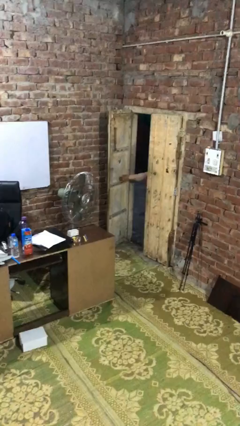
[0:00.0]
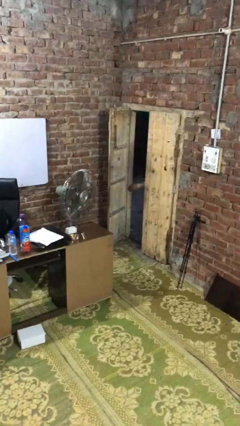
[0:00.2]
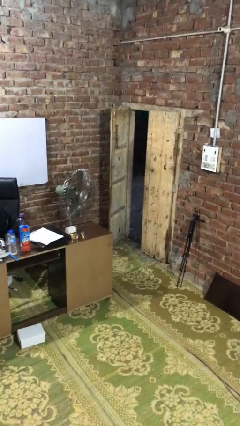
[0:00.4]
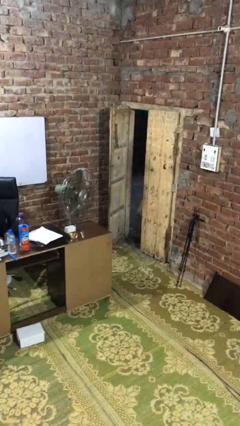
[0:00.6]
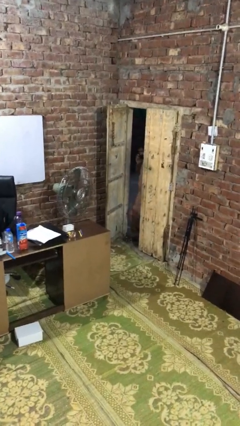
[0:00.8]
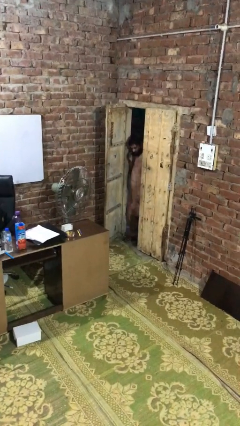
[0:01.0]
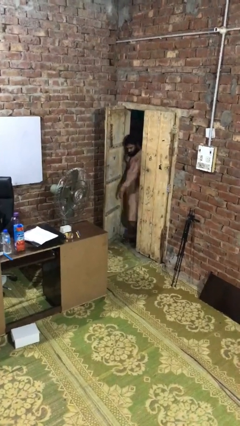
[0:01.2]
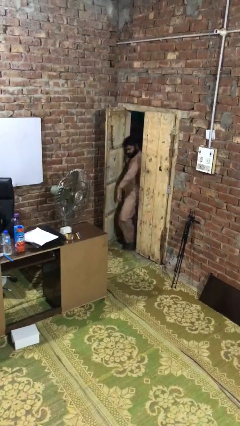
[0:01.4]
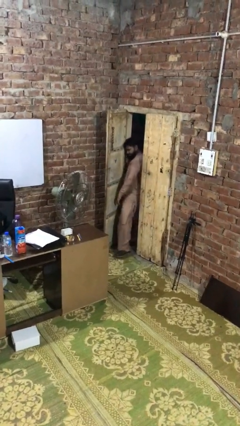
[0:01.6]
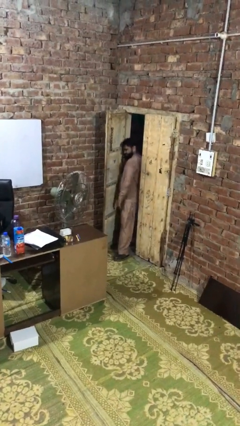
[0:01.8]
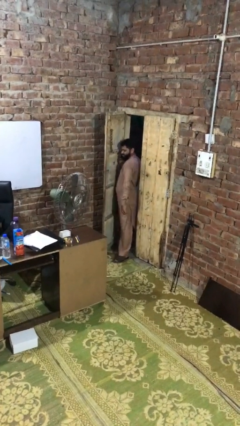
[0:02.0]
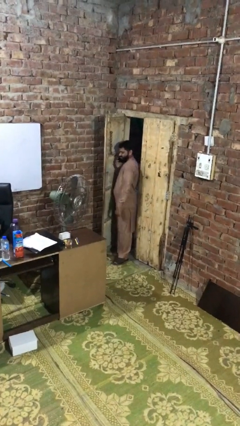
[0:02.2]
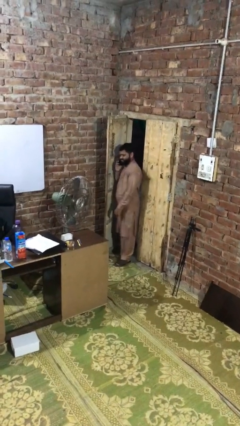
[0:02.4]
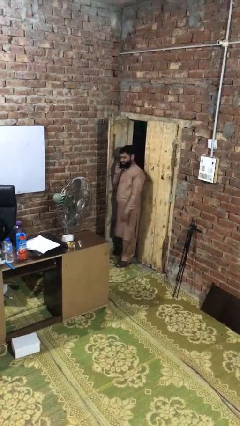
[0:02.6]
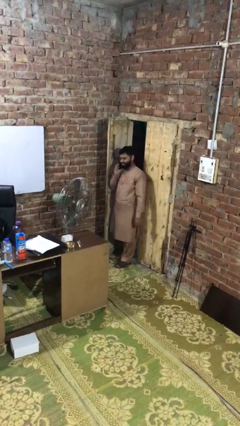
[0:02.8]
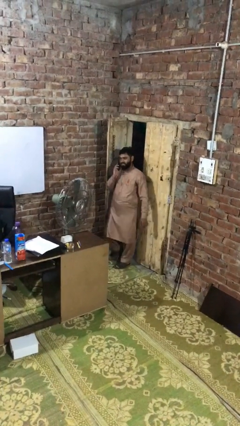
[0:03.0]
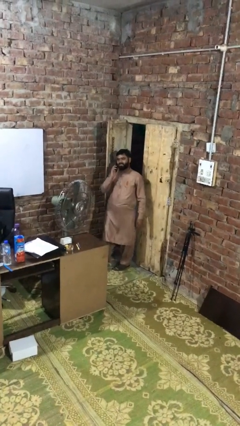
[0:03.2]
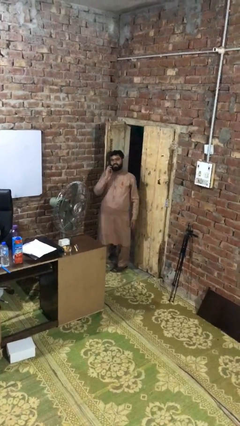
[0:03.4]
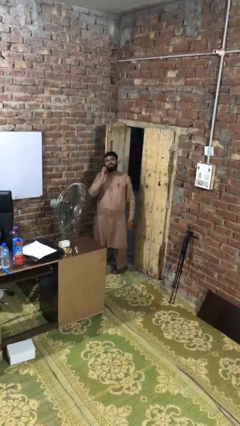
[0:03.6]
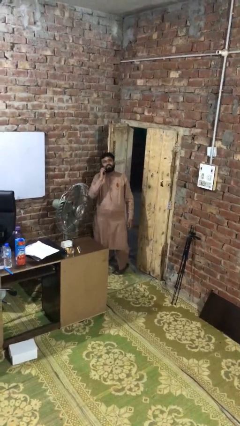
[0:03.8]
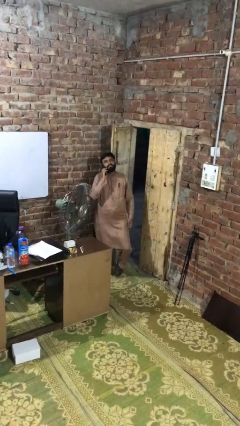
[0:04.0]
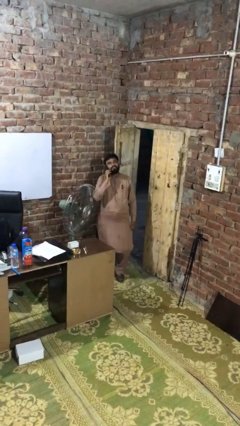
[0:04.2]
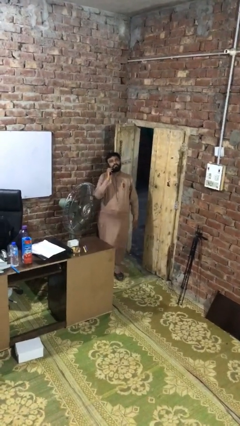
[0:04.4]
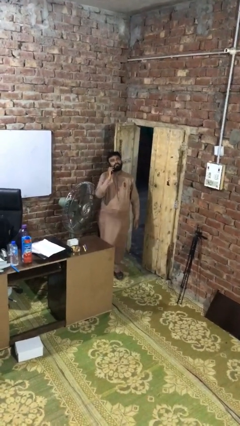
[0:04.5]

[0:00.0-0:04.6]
person enters scene through structure

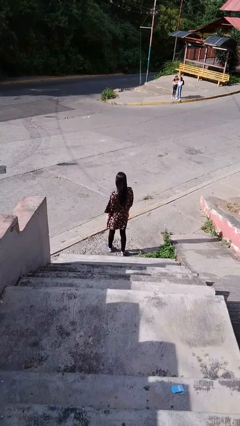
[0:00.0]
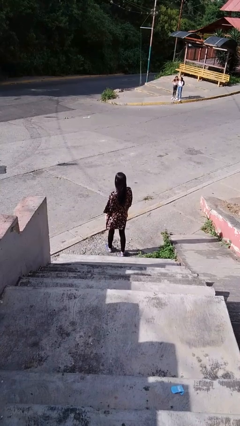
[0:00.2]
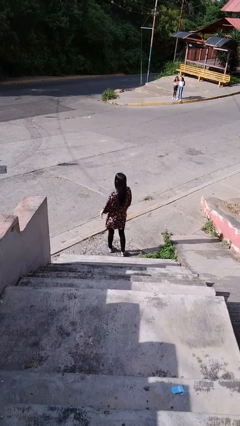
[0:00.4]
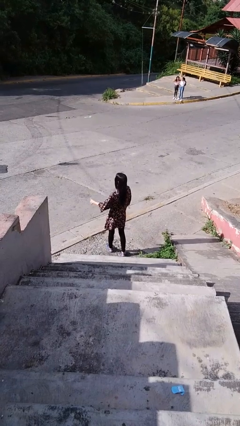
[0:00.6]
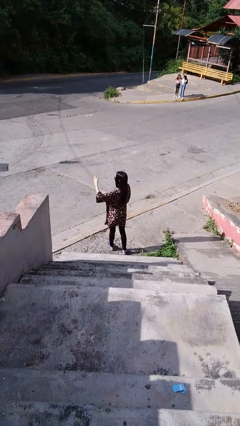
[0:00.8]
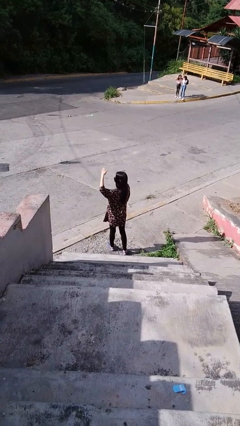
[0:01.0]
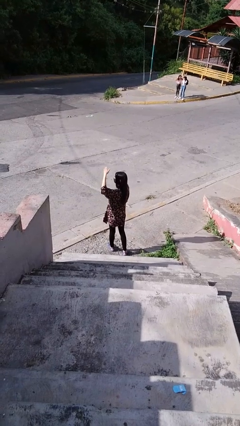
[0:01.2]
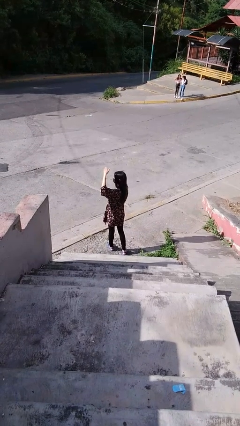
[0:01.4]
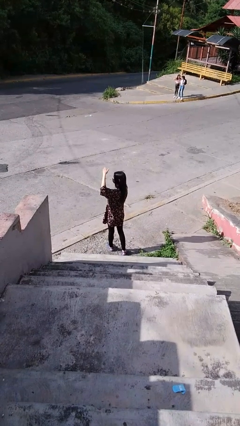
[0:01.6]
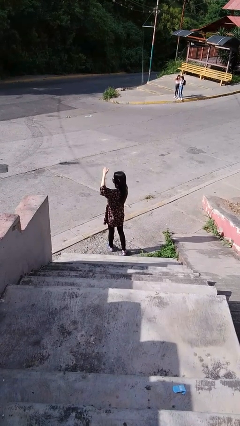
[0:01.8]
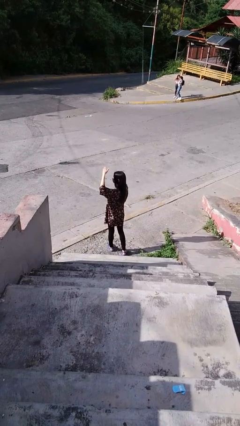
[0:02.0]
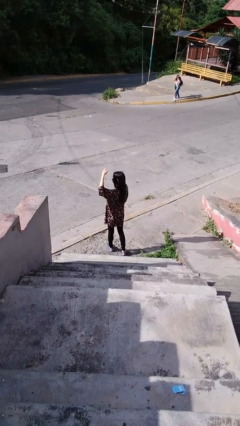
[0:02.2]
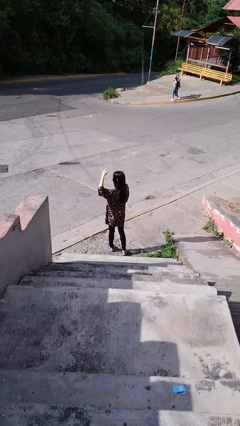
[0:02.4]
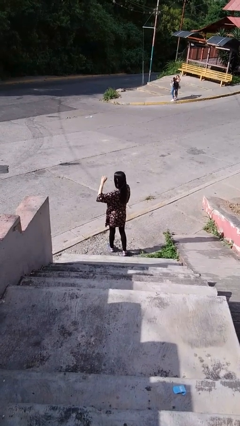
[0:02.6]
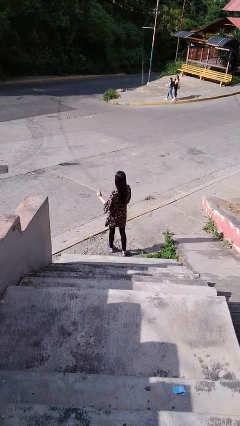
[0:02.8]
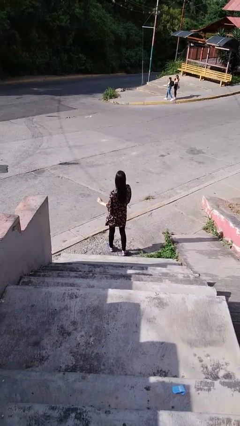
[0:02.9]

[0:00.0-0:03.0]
person shades eyes

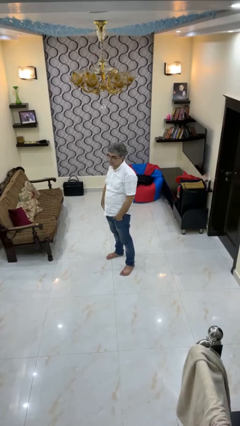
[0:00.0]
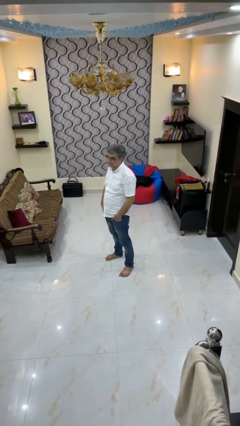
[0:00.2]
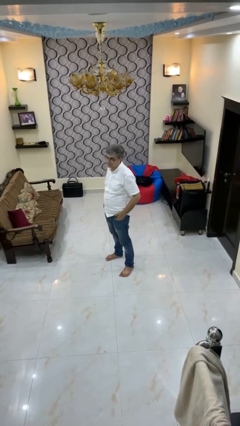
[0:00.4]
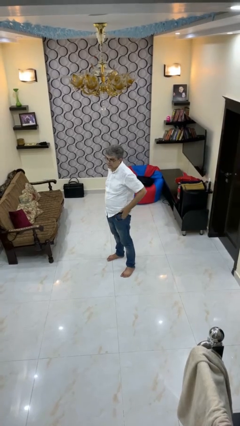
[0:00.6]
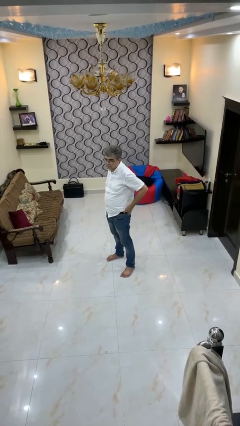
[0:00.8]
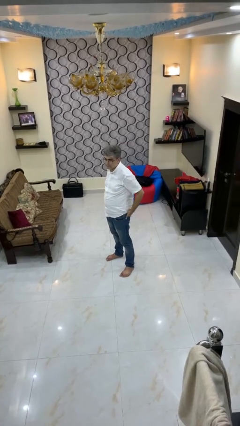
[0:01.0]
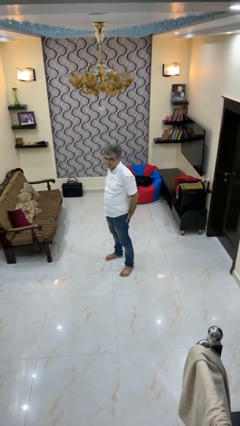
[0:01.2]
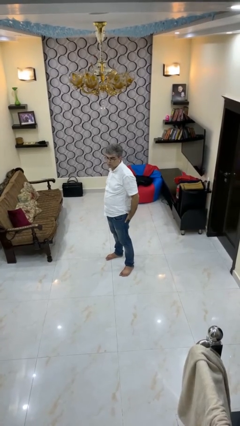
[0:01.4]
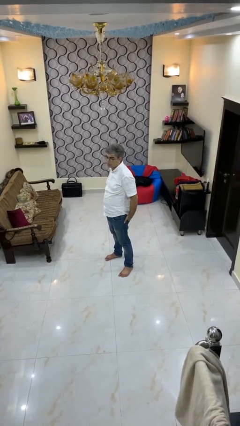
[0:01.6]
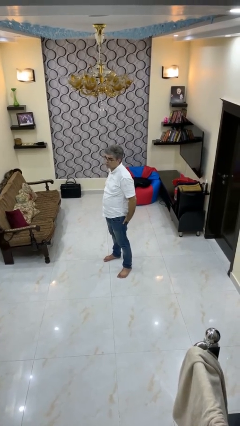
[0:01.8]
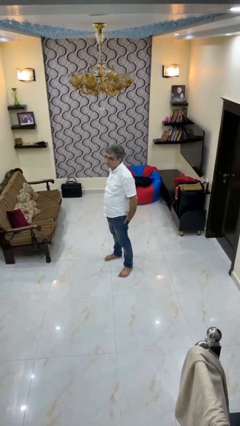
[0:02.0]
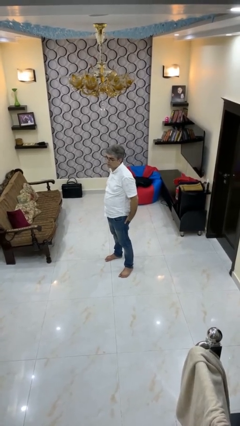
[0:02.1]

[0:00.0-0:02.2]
person puts hands in back pockets

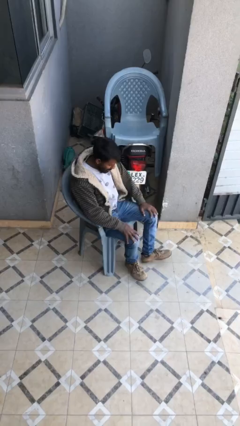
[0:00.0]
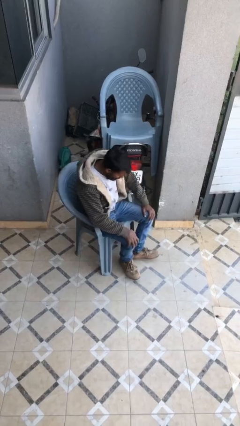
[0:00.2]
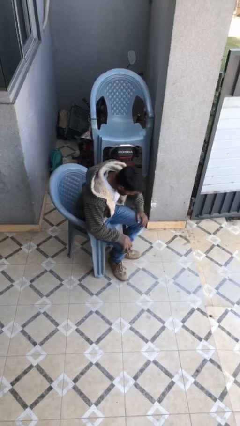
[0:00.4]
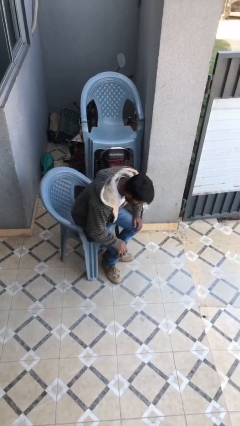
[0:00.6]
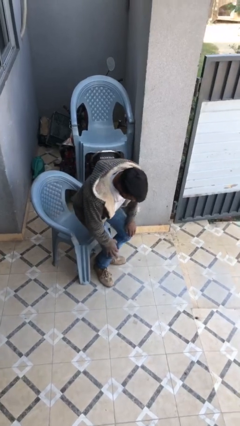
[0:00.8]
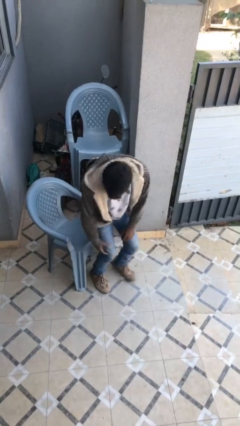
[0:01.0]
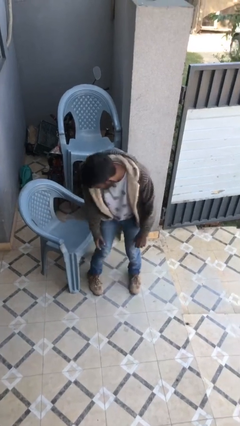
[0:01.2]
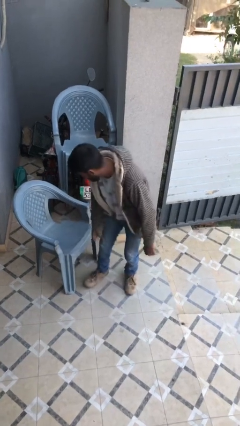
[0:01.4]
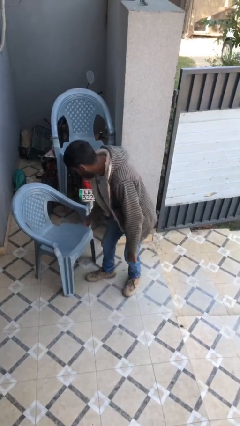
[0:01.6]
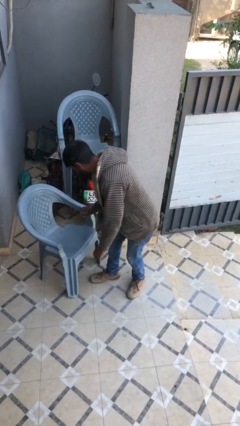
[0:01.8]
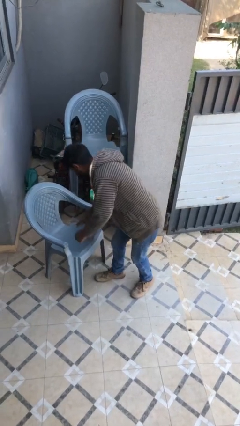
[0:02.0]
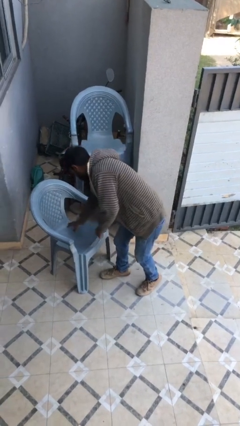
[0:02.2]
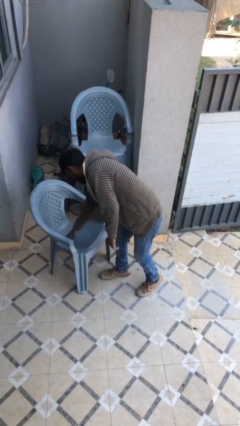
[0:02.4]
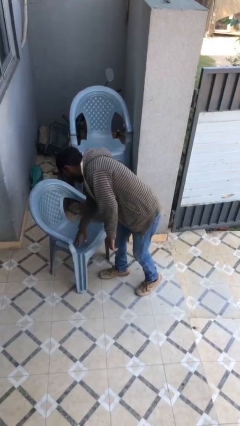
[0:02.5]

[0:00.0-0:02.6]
person stands up

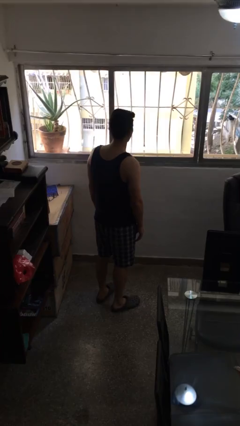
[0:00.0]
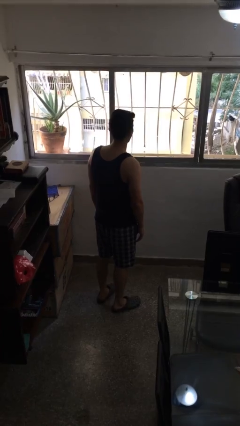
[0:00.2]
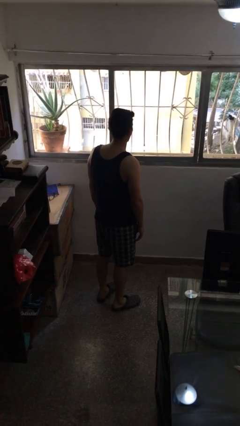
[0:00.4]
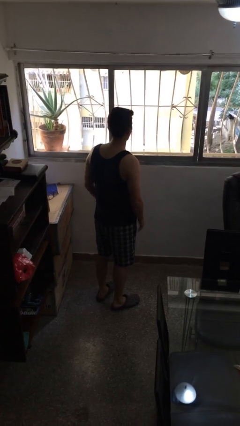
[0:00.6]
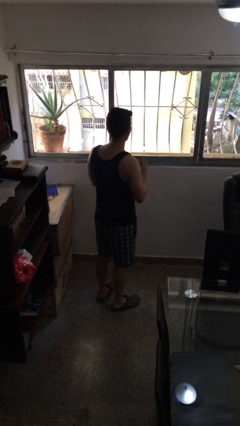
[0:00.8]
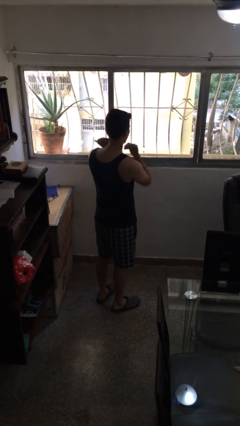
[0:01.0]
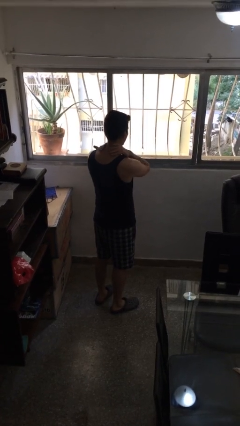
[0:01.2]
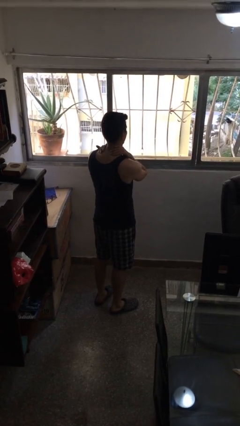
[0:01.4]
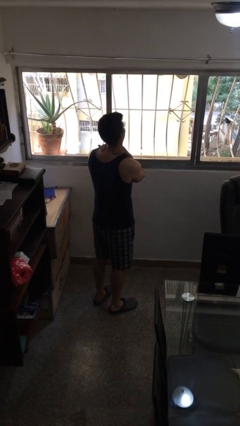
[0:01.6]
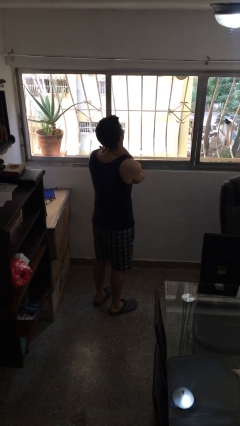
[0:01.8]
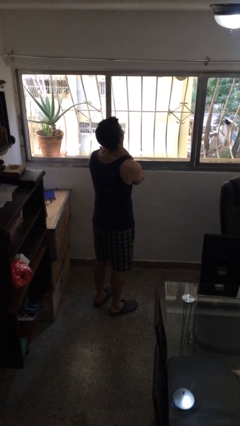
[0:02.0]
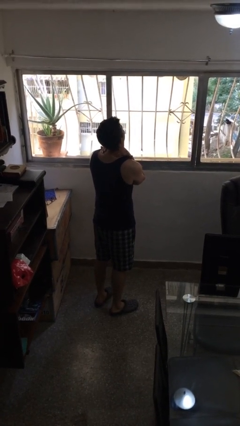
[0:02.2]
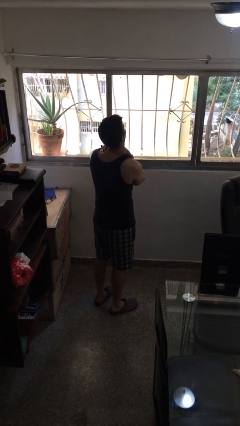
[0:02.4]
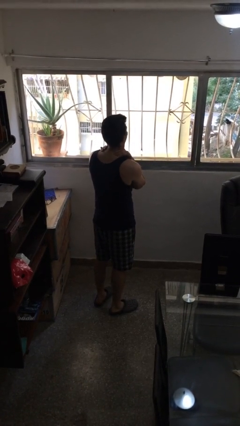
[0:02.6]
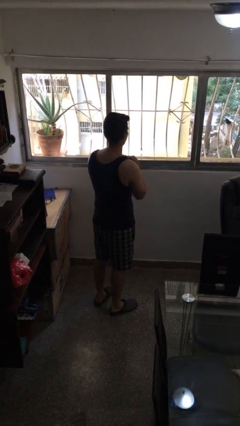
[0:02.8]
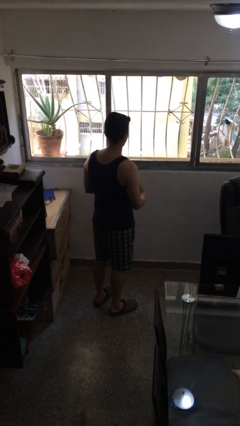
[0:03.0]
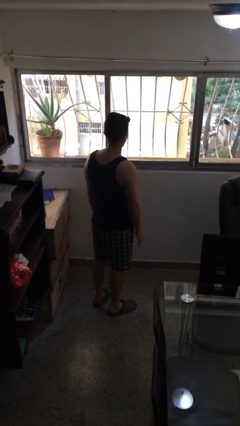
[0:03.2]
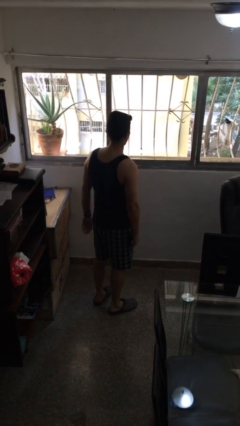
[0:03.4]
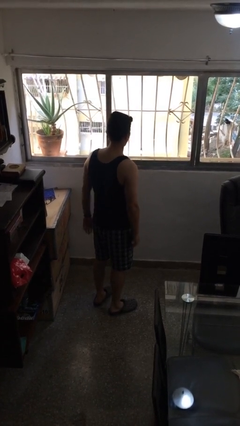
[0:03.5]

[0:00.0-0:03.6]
person rubs neck

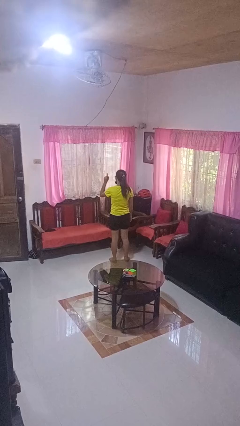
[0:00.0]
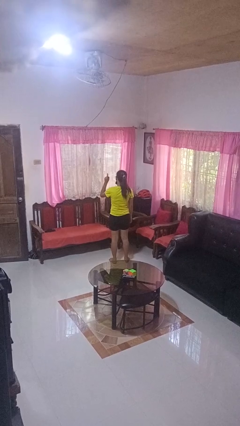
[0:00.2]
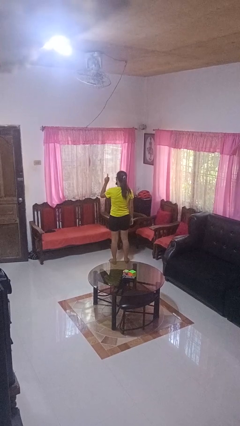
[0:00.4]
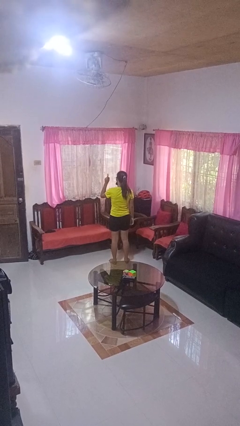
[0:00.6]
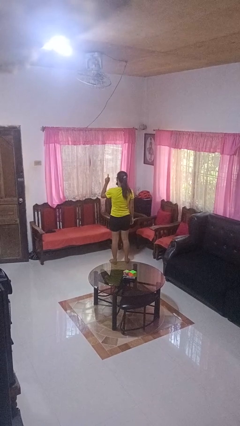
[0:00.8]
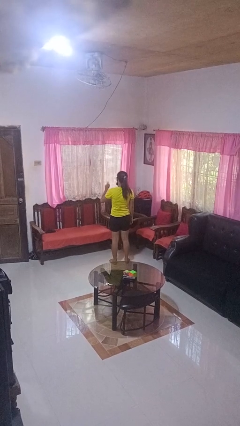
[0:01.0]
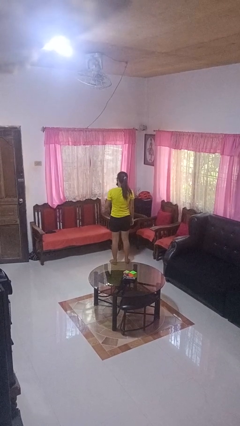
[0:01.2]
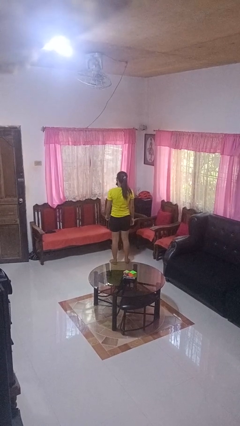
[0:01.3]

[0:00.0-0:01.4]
person gestures number one

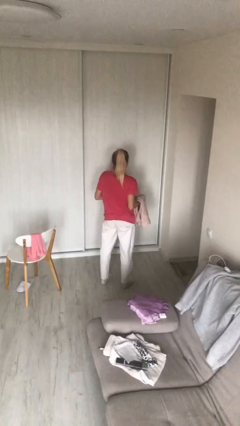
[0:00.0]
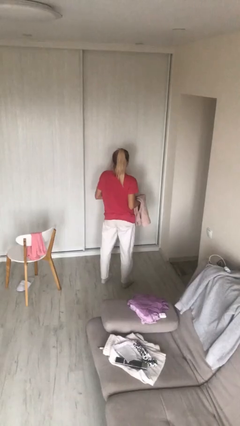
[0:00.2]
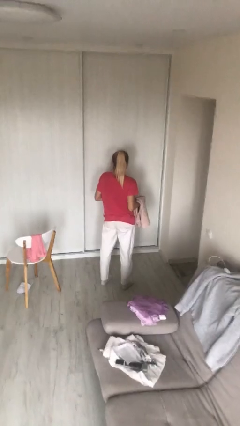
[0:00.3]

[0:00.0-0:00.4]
person dries hair with towel
